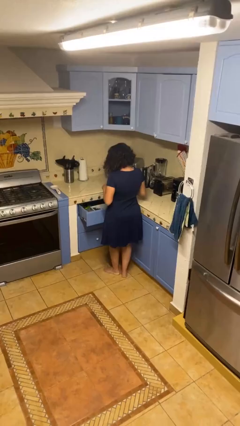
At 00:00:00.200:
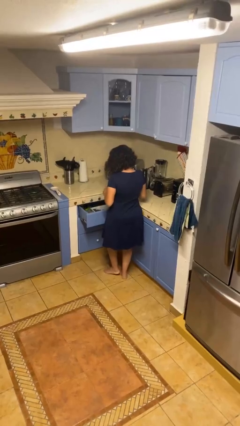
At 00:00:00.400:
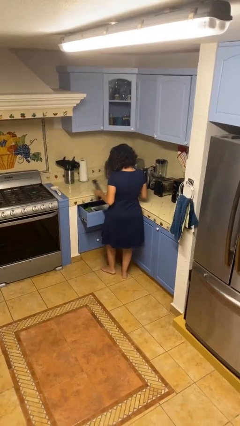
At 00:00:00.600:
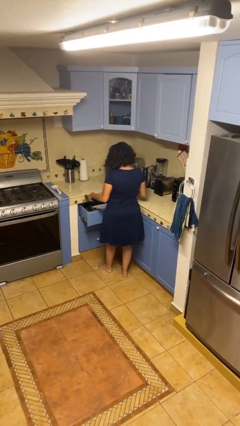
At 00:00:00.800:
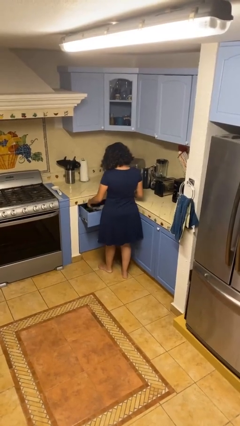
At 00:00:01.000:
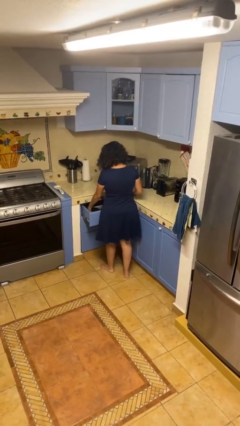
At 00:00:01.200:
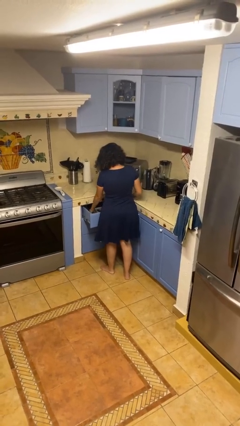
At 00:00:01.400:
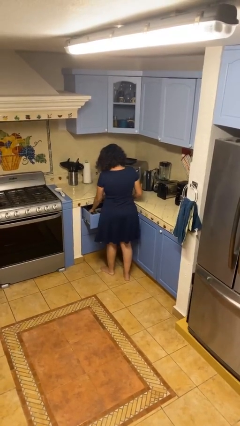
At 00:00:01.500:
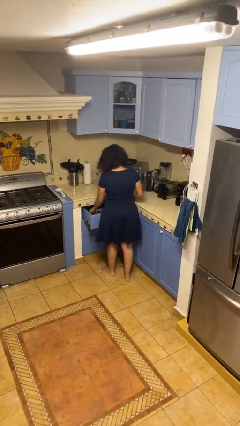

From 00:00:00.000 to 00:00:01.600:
person puts object into kitchen drawer

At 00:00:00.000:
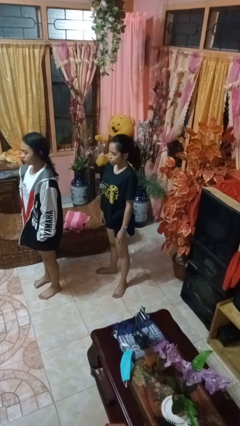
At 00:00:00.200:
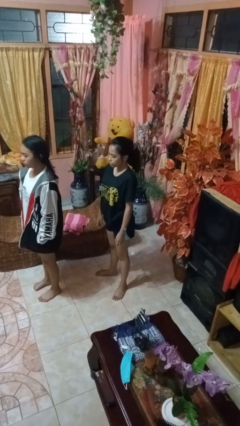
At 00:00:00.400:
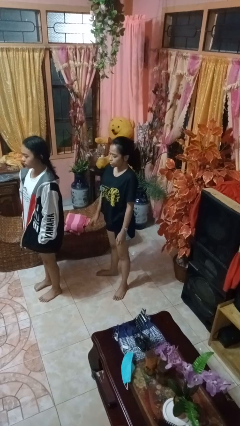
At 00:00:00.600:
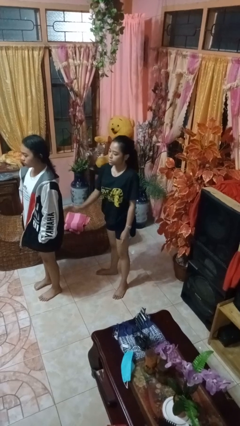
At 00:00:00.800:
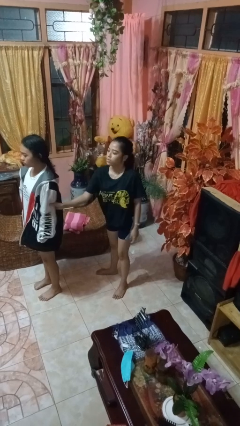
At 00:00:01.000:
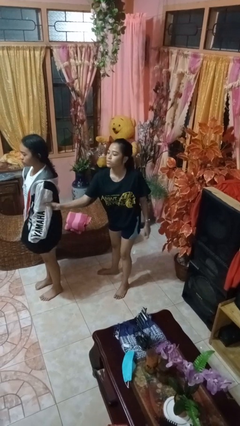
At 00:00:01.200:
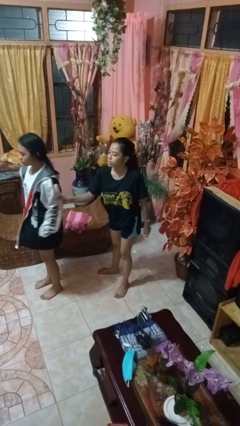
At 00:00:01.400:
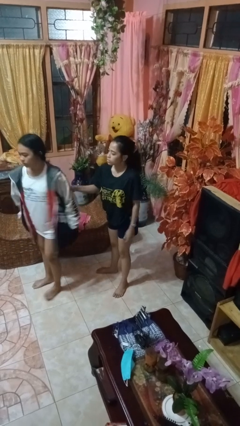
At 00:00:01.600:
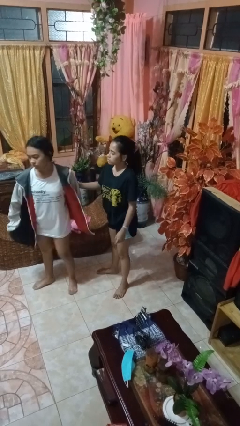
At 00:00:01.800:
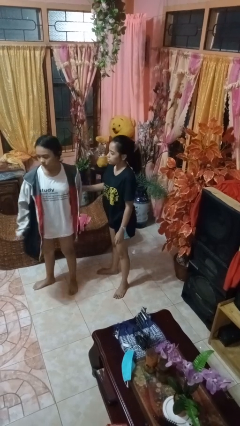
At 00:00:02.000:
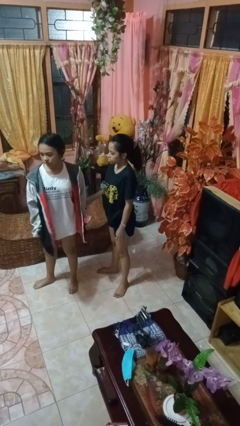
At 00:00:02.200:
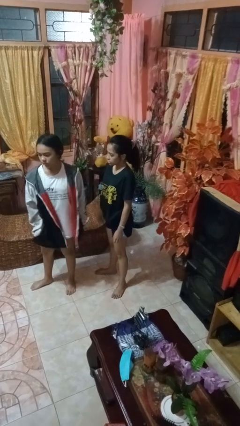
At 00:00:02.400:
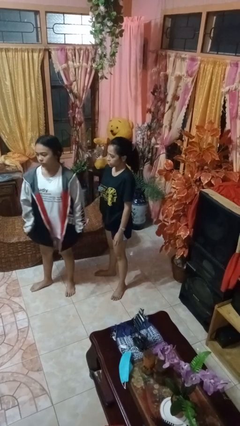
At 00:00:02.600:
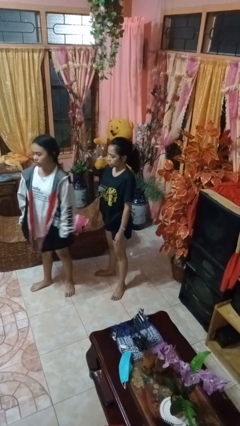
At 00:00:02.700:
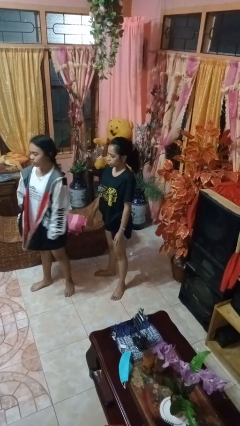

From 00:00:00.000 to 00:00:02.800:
person grabs person by bicep

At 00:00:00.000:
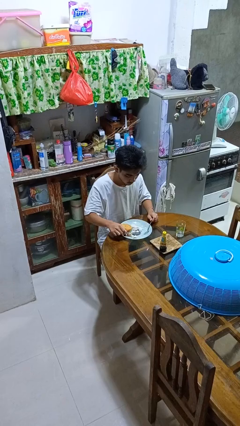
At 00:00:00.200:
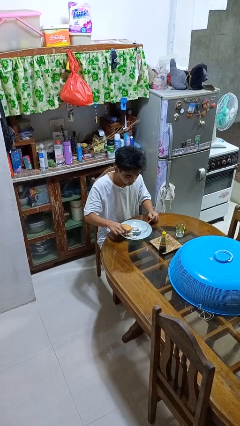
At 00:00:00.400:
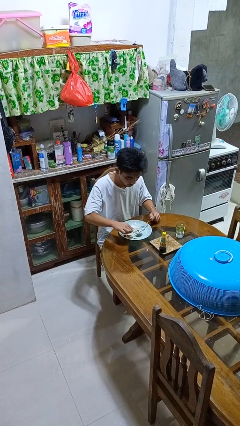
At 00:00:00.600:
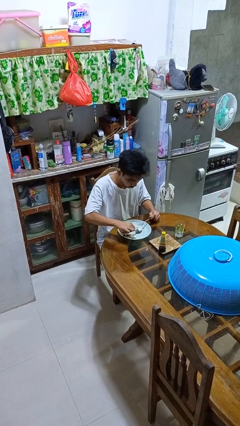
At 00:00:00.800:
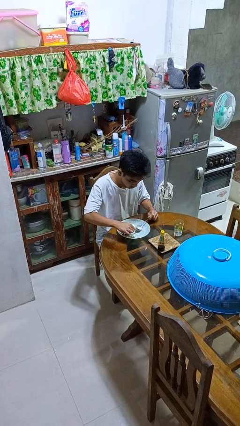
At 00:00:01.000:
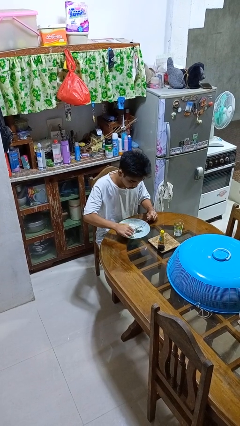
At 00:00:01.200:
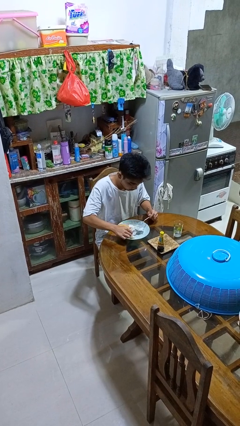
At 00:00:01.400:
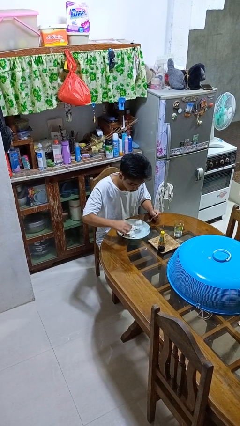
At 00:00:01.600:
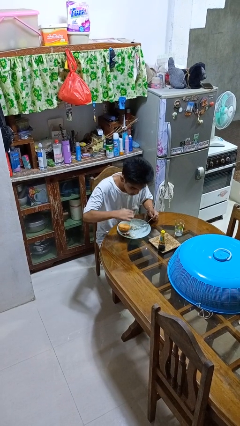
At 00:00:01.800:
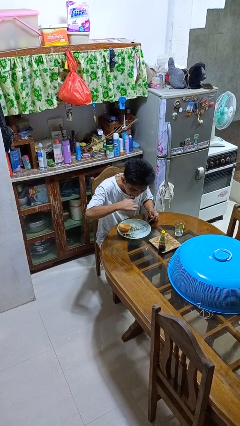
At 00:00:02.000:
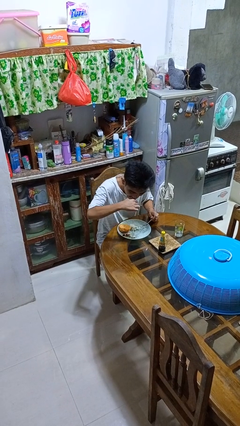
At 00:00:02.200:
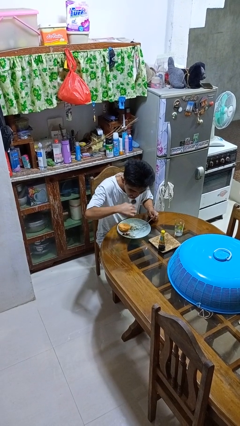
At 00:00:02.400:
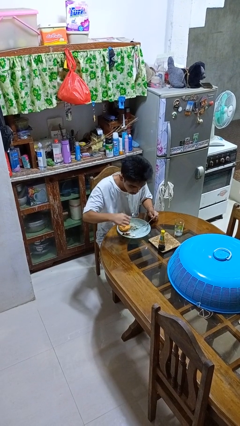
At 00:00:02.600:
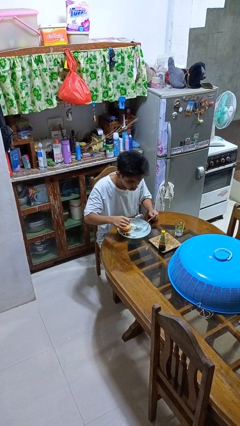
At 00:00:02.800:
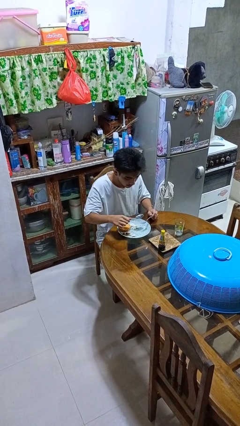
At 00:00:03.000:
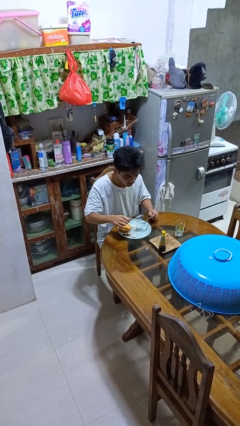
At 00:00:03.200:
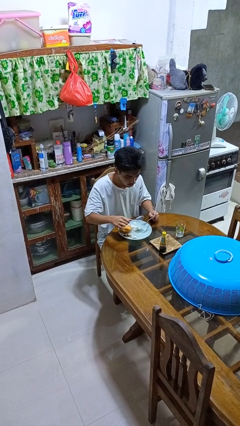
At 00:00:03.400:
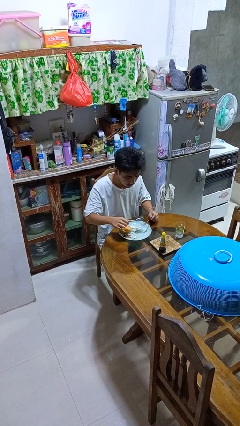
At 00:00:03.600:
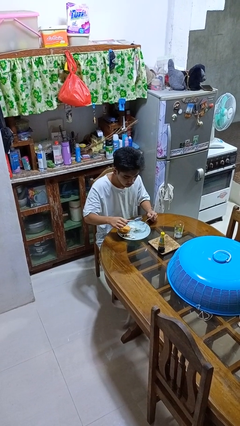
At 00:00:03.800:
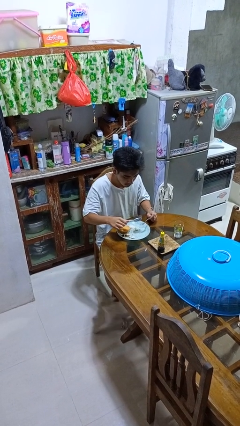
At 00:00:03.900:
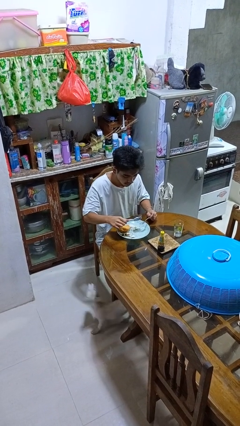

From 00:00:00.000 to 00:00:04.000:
person eats with utensil

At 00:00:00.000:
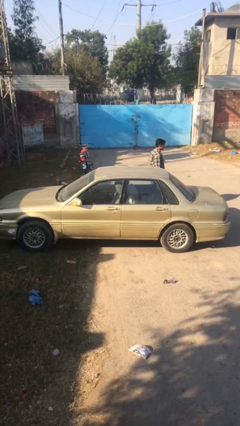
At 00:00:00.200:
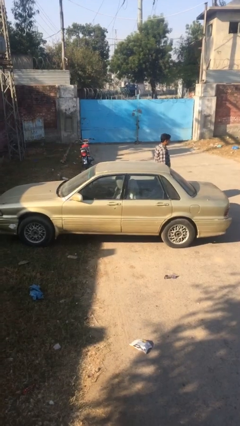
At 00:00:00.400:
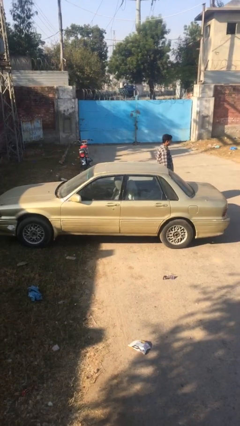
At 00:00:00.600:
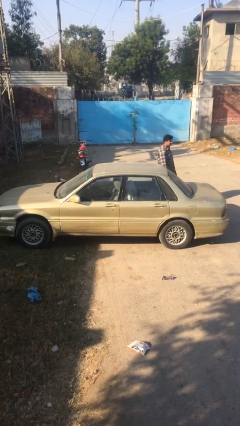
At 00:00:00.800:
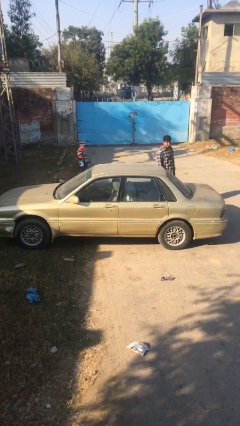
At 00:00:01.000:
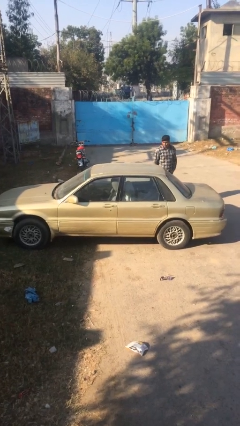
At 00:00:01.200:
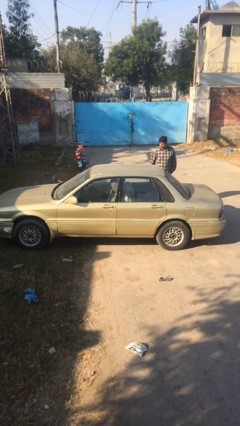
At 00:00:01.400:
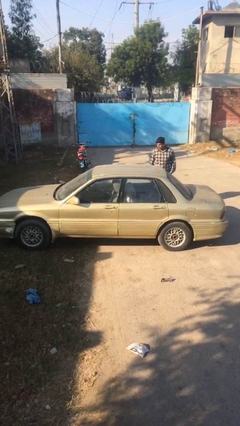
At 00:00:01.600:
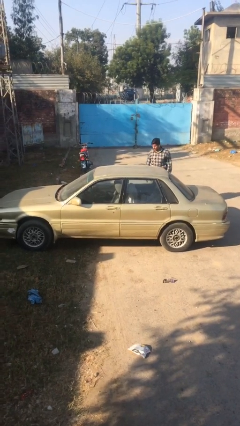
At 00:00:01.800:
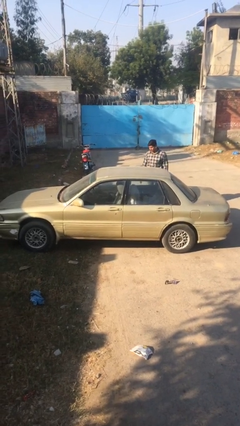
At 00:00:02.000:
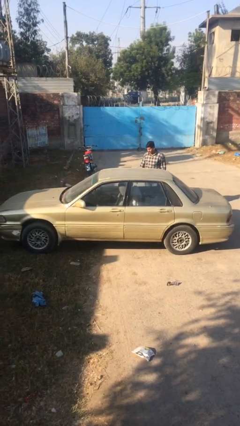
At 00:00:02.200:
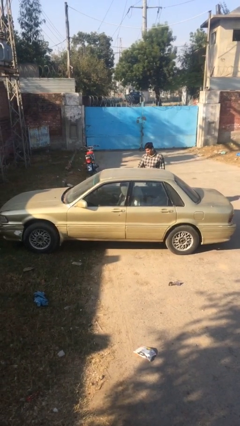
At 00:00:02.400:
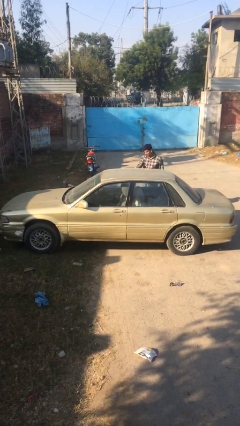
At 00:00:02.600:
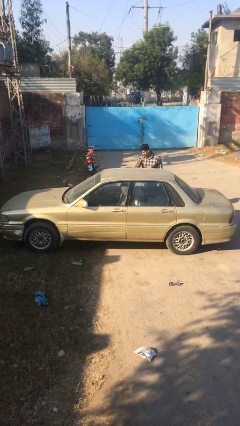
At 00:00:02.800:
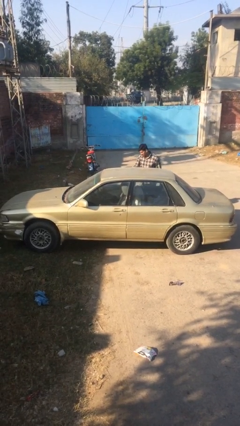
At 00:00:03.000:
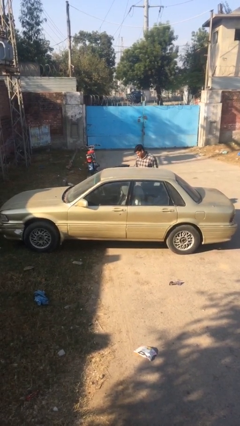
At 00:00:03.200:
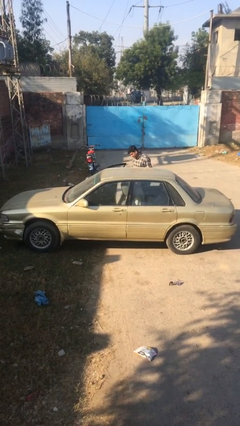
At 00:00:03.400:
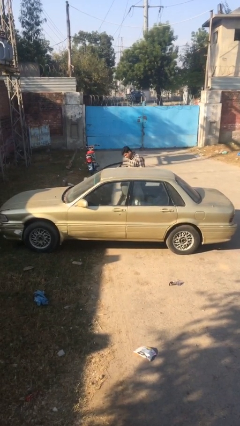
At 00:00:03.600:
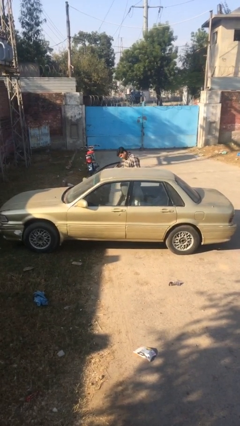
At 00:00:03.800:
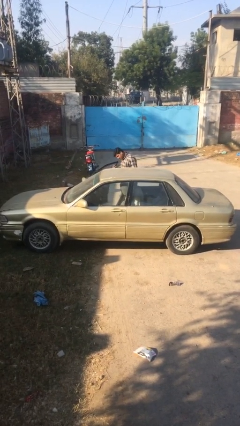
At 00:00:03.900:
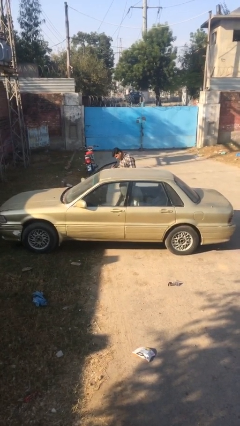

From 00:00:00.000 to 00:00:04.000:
person opens car door

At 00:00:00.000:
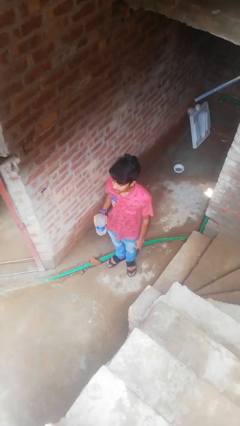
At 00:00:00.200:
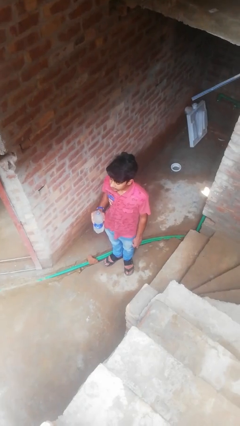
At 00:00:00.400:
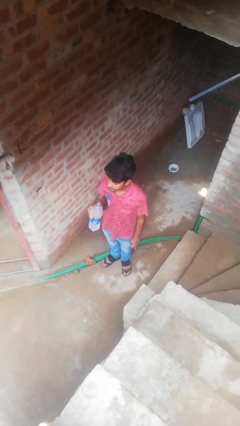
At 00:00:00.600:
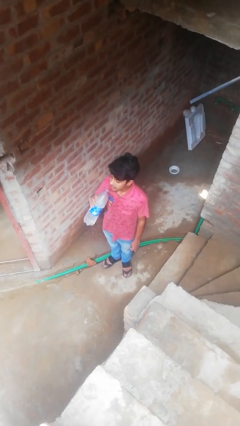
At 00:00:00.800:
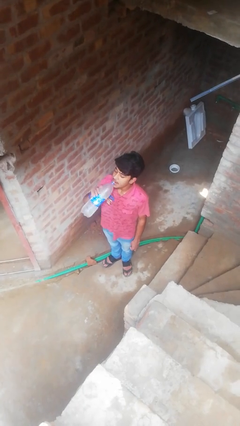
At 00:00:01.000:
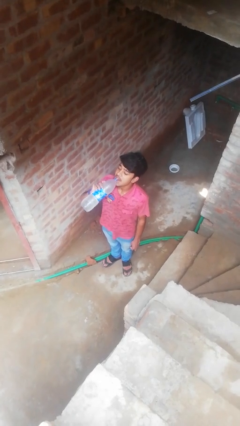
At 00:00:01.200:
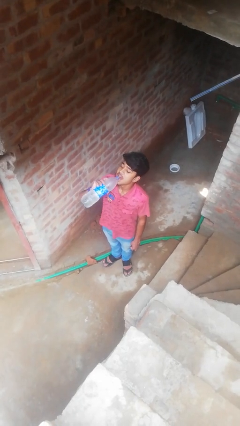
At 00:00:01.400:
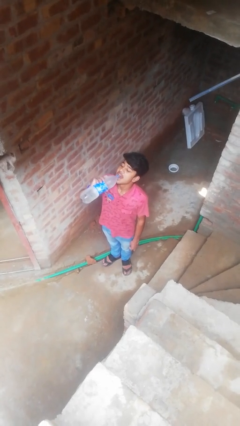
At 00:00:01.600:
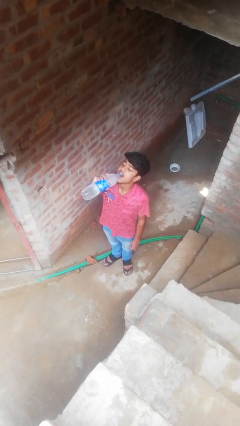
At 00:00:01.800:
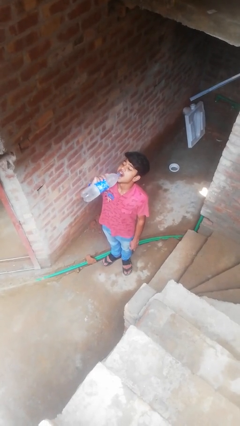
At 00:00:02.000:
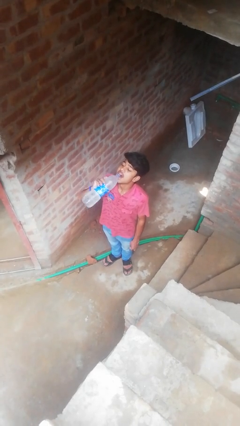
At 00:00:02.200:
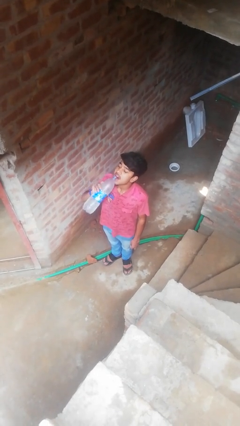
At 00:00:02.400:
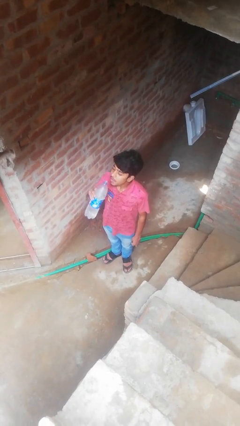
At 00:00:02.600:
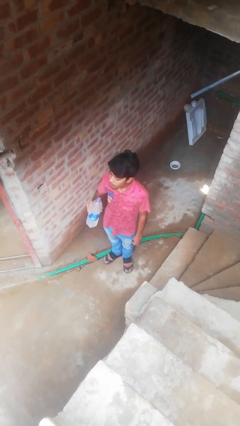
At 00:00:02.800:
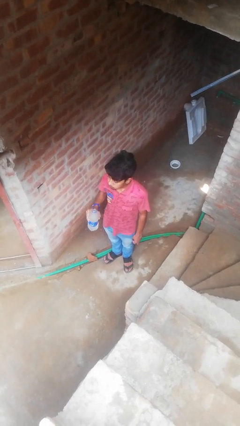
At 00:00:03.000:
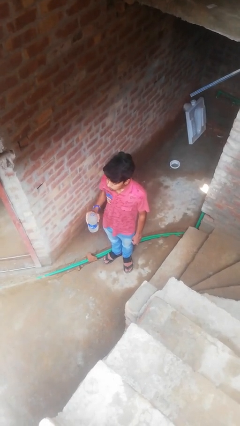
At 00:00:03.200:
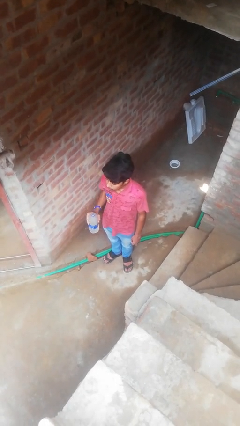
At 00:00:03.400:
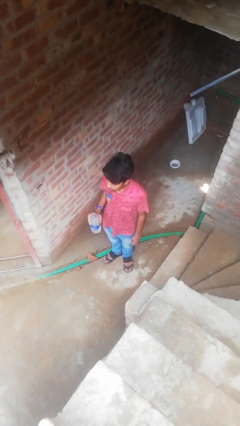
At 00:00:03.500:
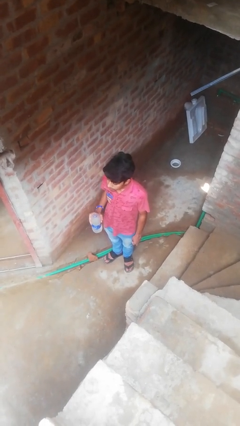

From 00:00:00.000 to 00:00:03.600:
person drinks from bottle

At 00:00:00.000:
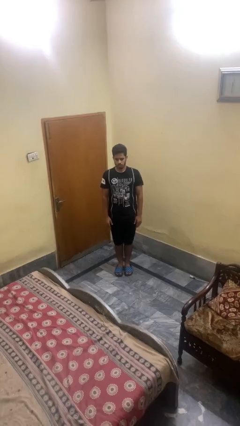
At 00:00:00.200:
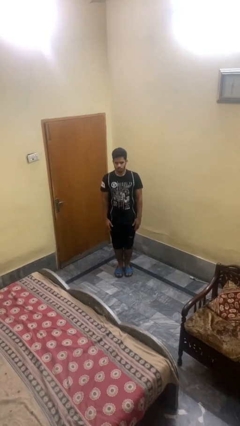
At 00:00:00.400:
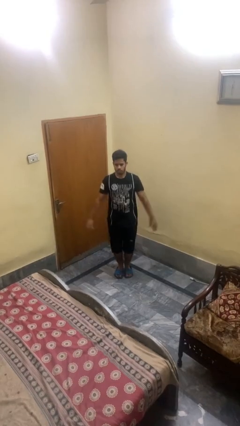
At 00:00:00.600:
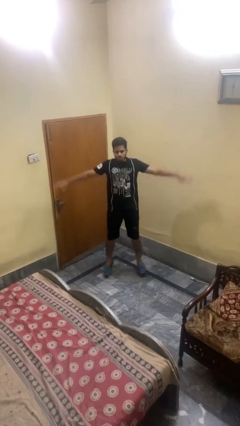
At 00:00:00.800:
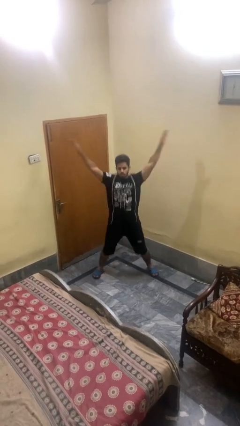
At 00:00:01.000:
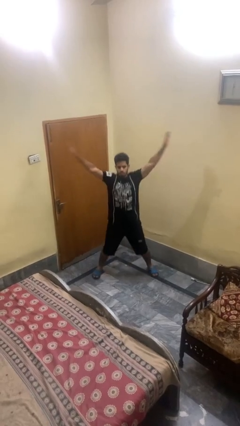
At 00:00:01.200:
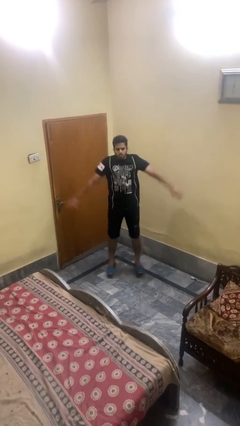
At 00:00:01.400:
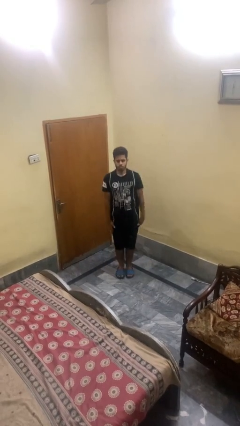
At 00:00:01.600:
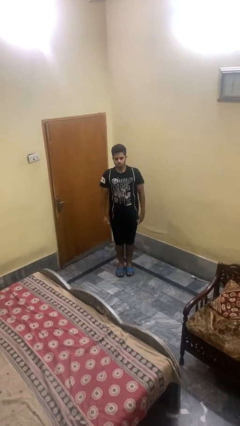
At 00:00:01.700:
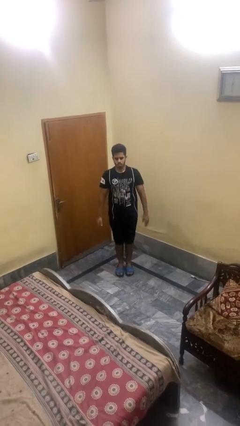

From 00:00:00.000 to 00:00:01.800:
person exercises with jumping jacks
